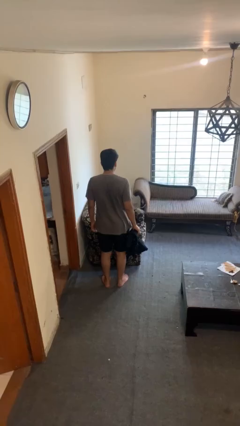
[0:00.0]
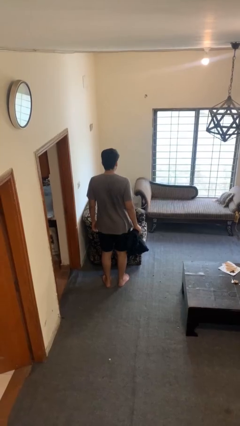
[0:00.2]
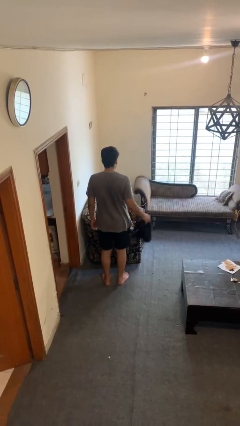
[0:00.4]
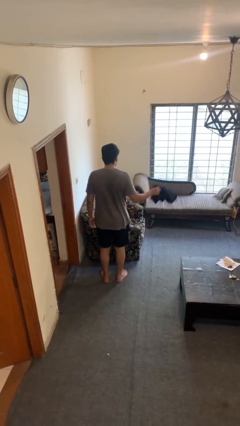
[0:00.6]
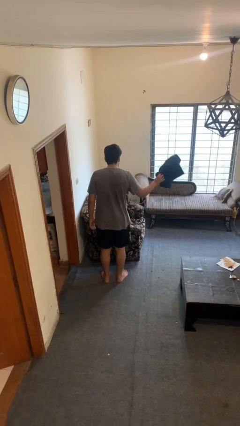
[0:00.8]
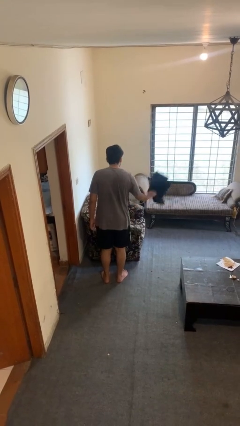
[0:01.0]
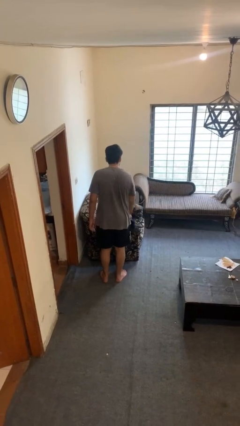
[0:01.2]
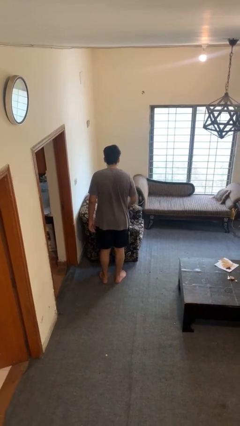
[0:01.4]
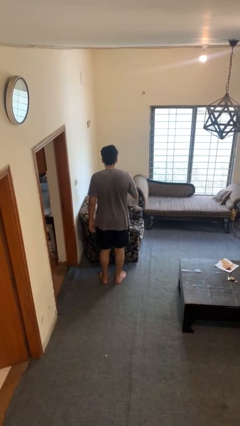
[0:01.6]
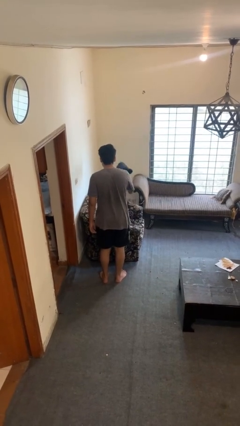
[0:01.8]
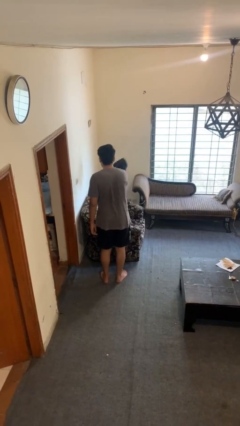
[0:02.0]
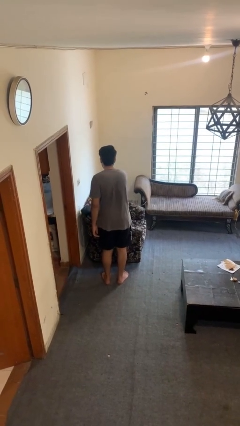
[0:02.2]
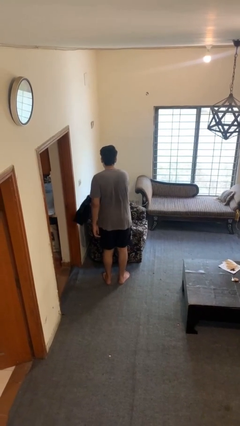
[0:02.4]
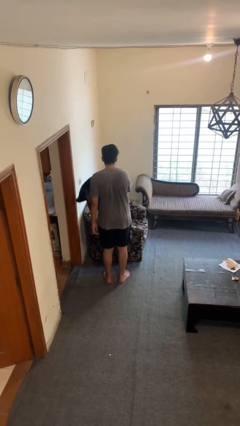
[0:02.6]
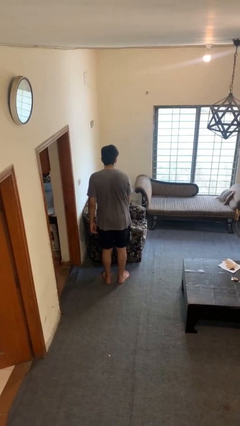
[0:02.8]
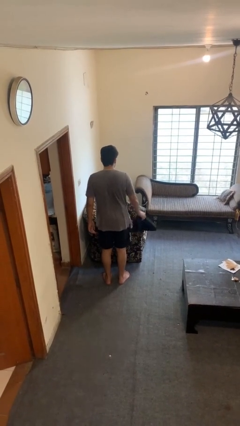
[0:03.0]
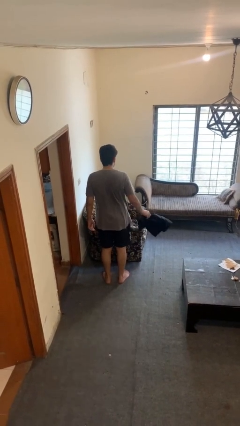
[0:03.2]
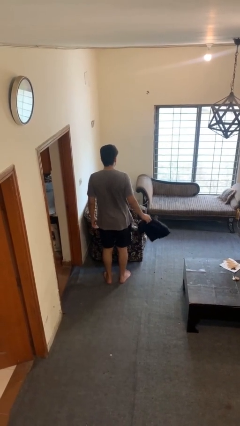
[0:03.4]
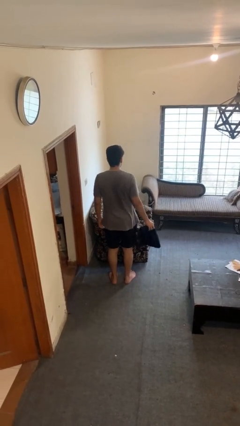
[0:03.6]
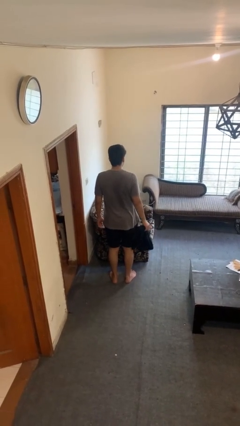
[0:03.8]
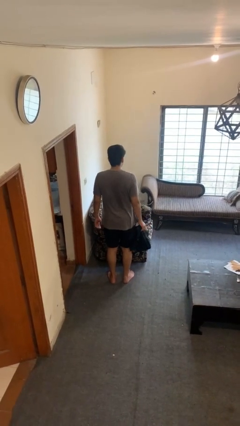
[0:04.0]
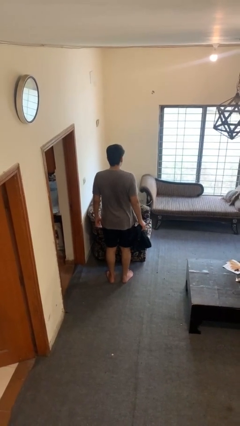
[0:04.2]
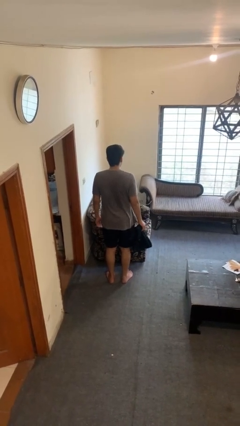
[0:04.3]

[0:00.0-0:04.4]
person dusts furniture

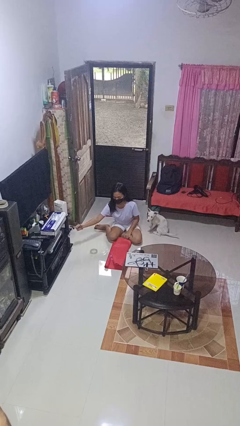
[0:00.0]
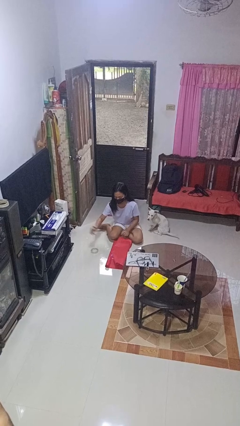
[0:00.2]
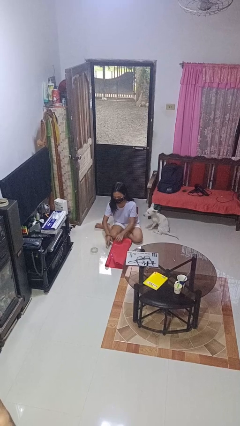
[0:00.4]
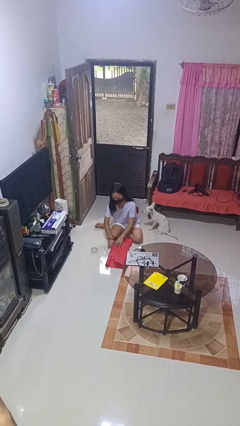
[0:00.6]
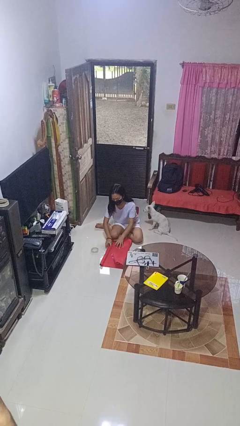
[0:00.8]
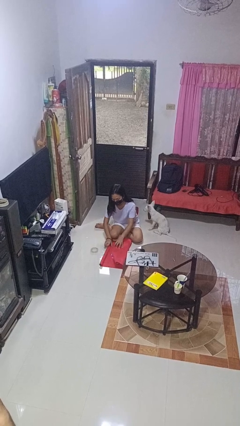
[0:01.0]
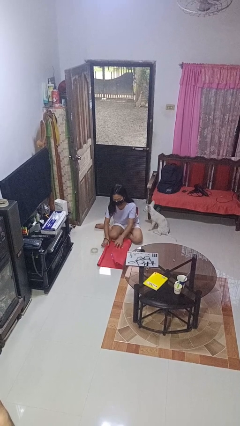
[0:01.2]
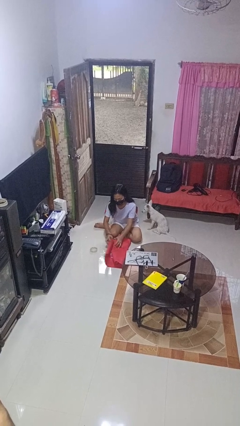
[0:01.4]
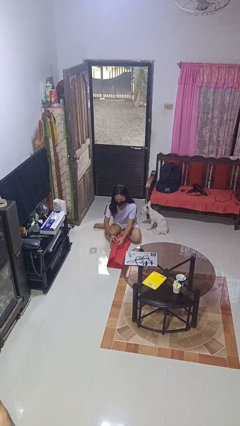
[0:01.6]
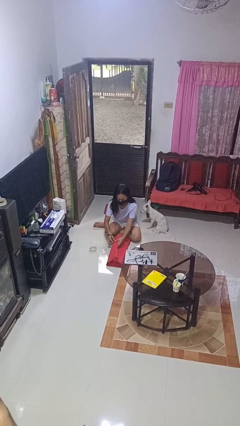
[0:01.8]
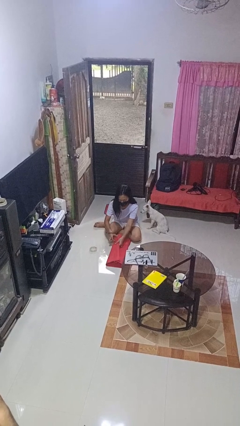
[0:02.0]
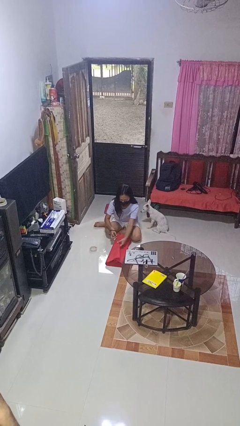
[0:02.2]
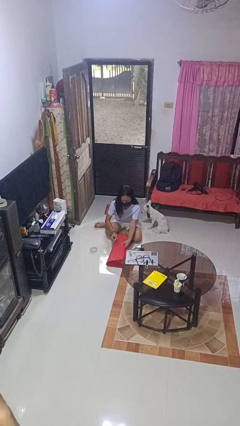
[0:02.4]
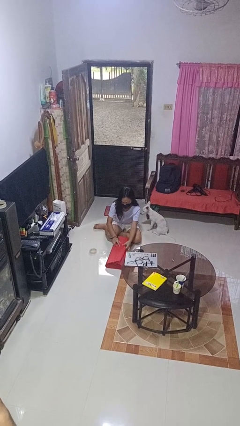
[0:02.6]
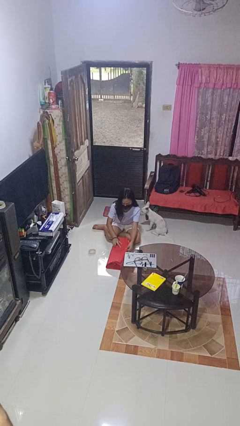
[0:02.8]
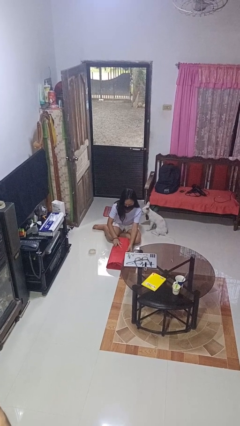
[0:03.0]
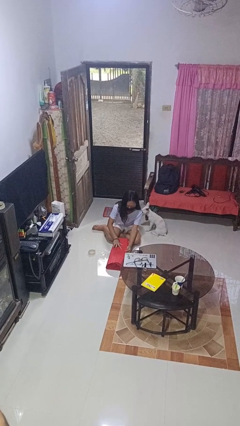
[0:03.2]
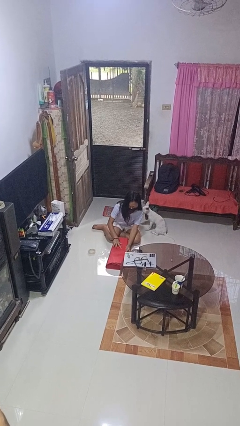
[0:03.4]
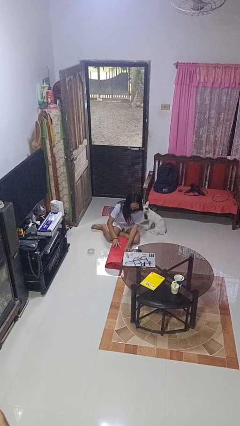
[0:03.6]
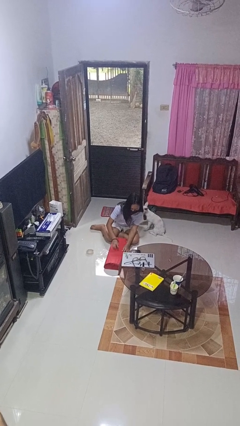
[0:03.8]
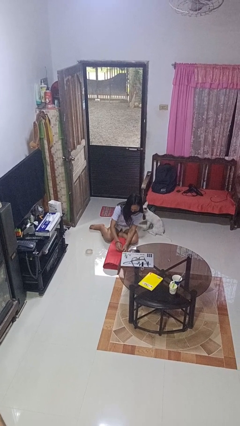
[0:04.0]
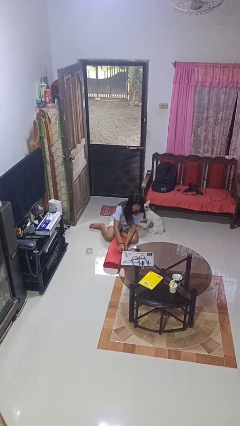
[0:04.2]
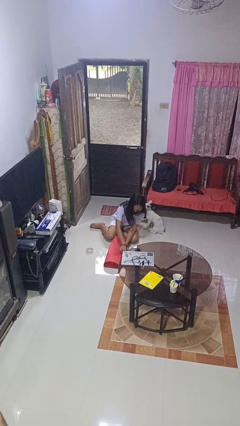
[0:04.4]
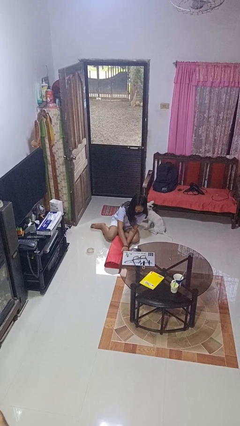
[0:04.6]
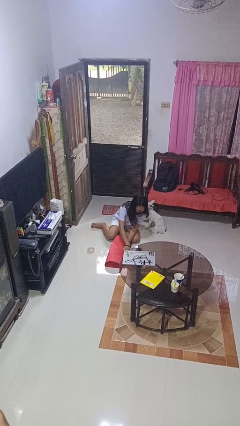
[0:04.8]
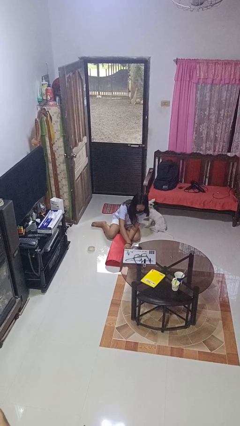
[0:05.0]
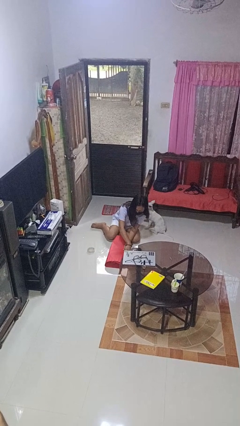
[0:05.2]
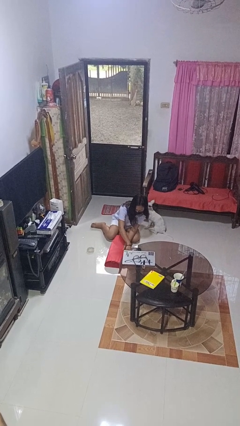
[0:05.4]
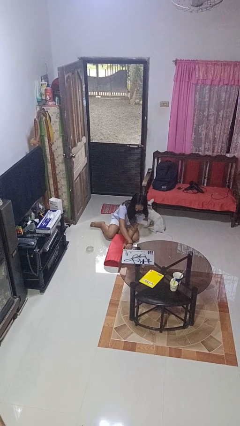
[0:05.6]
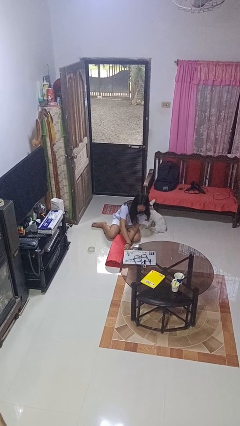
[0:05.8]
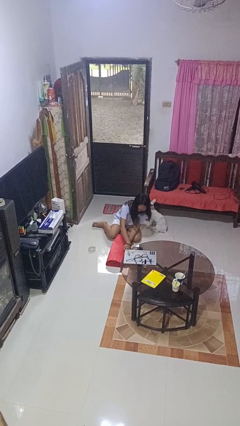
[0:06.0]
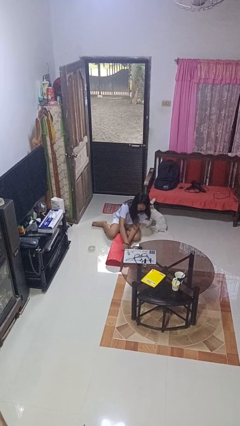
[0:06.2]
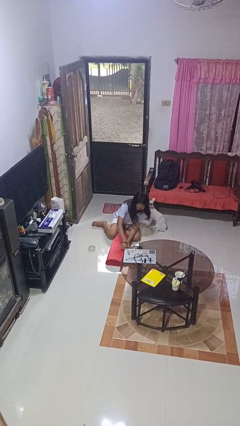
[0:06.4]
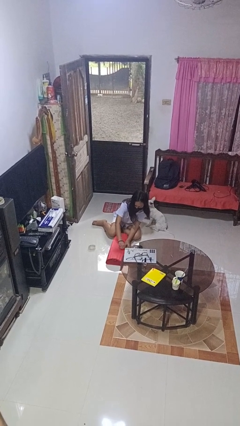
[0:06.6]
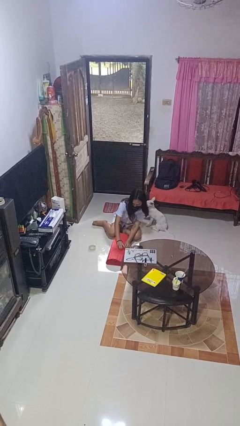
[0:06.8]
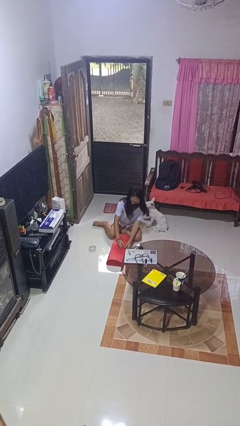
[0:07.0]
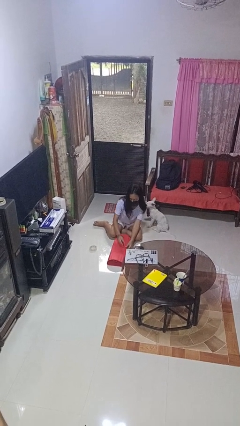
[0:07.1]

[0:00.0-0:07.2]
person wraps box

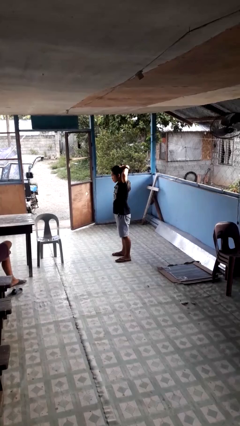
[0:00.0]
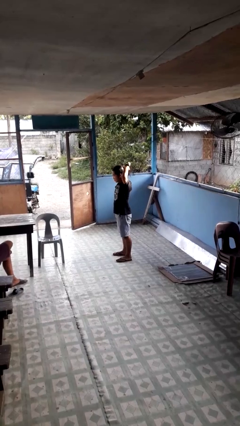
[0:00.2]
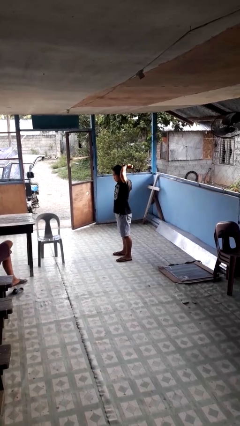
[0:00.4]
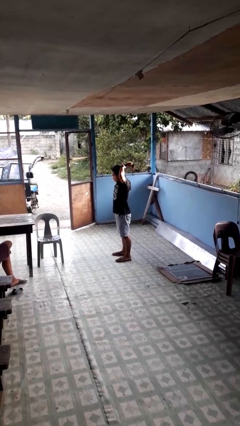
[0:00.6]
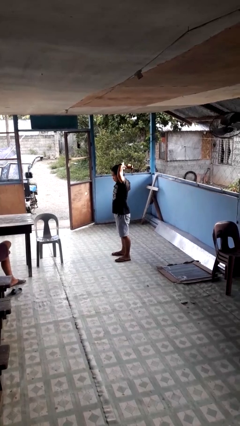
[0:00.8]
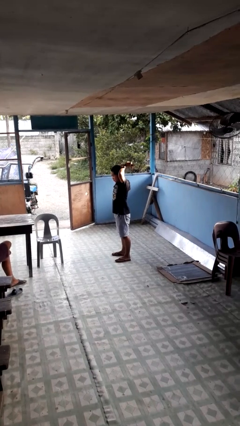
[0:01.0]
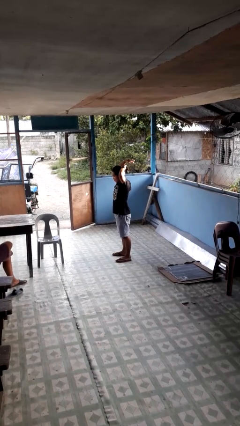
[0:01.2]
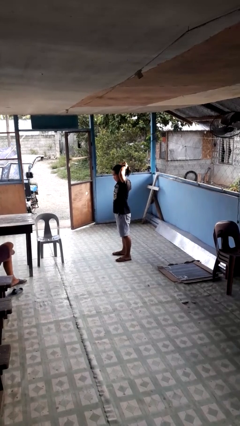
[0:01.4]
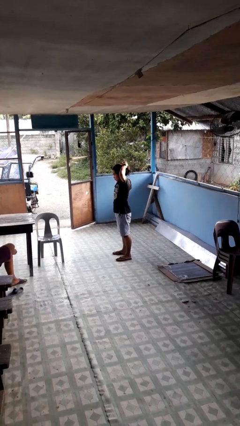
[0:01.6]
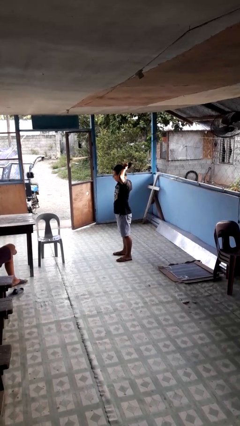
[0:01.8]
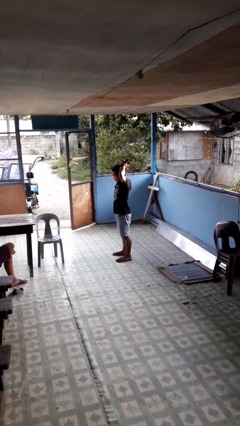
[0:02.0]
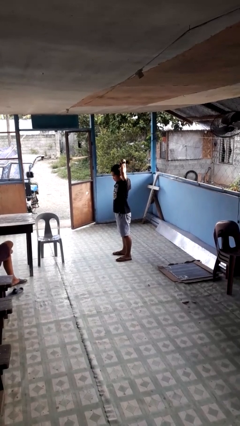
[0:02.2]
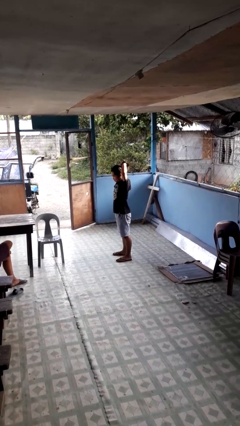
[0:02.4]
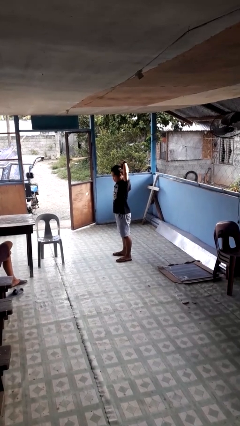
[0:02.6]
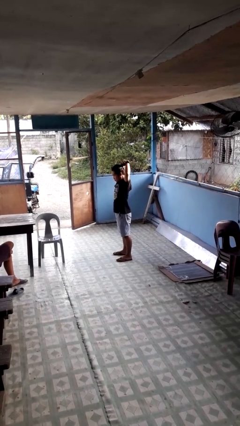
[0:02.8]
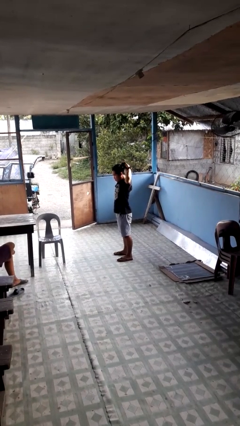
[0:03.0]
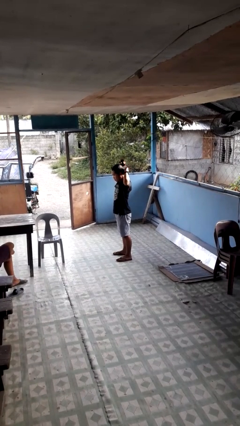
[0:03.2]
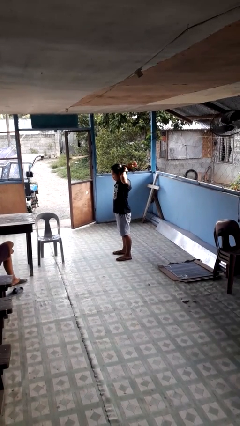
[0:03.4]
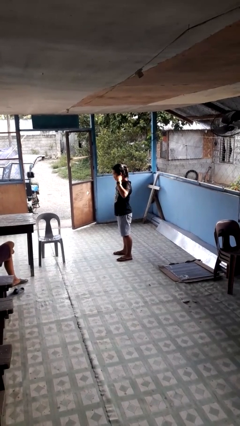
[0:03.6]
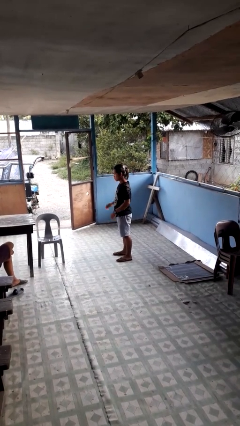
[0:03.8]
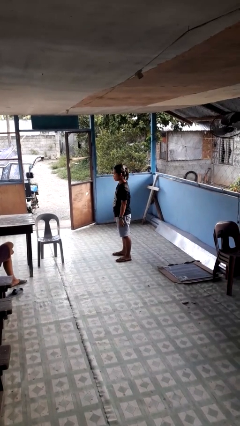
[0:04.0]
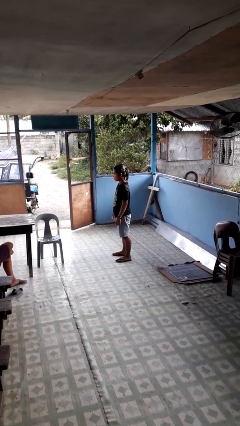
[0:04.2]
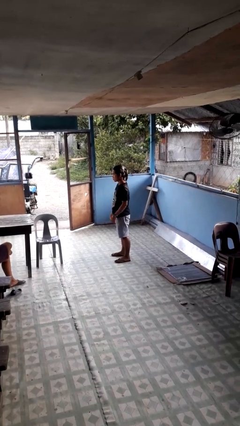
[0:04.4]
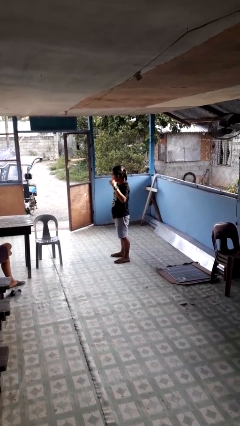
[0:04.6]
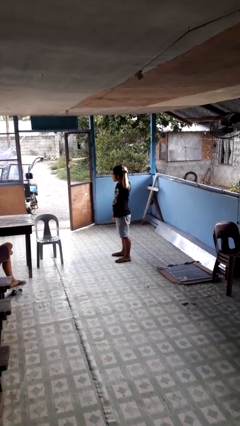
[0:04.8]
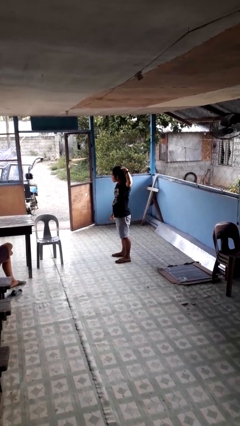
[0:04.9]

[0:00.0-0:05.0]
person puts hair in ponytail

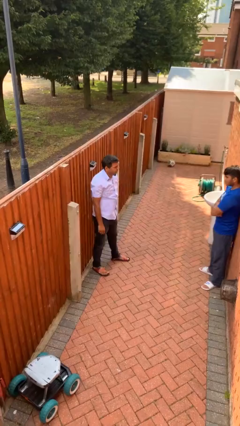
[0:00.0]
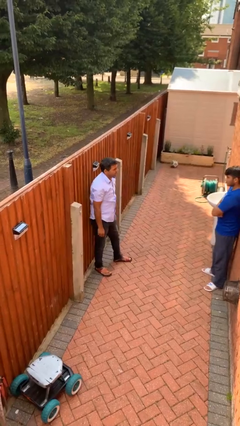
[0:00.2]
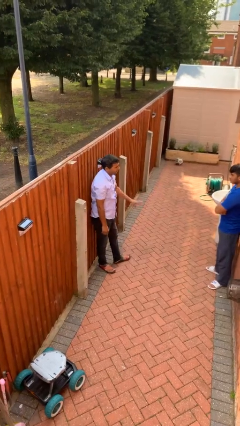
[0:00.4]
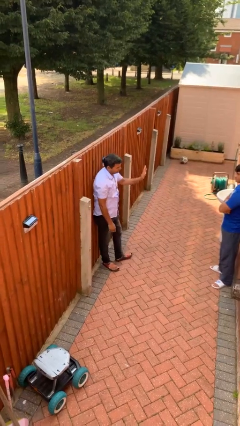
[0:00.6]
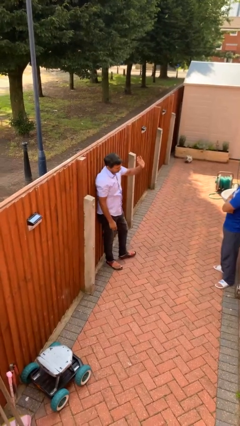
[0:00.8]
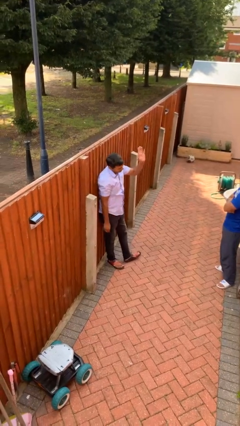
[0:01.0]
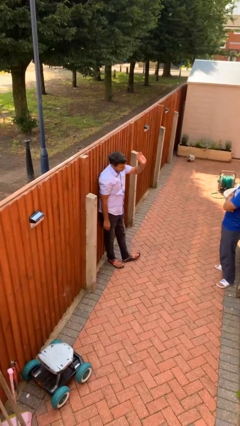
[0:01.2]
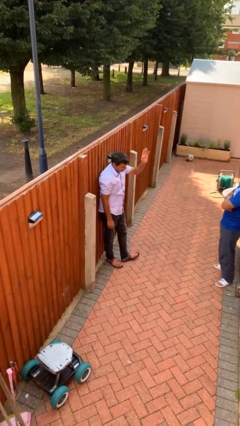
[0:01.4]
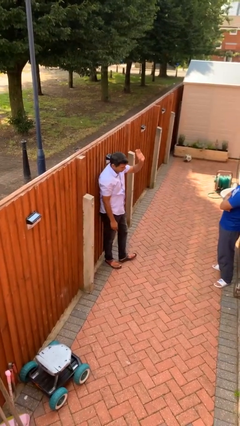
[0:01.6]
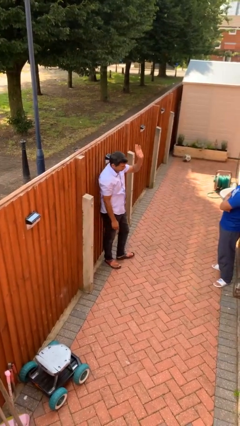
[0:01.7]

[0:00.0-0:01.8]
person waves at person
